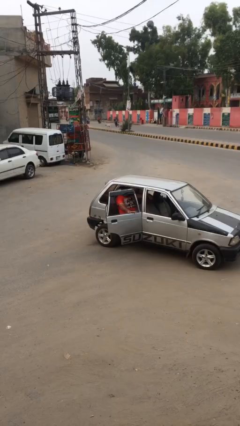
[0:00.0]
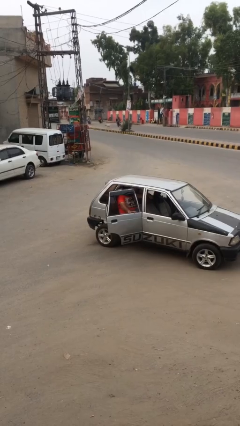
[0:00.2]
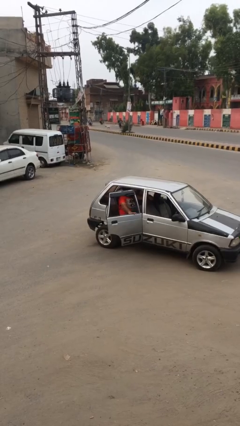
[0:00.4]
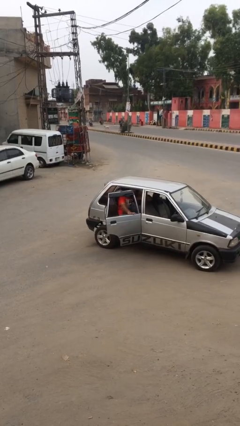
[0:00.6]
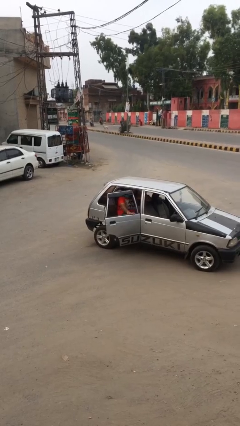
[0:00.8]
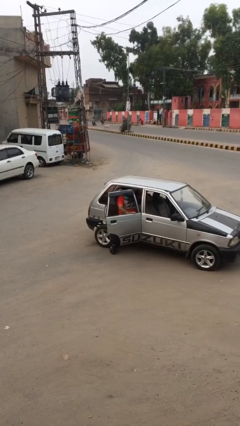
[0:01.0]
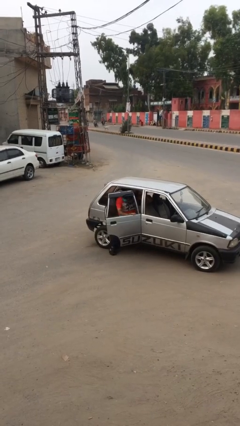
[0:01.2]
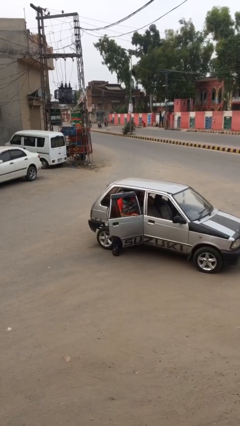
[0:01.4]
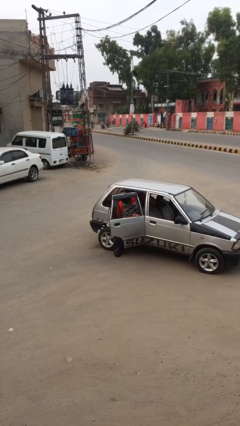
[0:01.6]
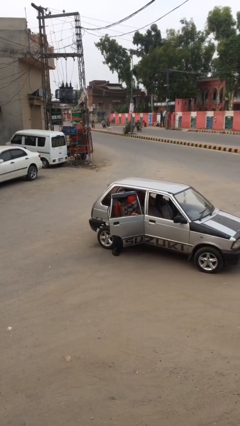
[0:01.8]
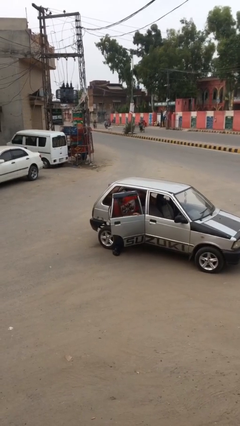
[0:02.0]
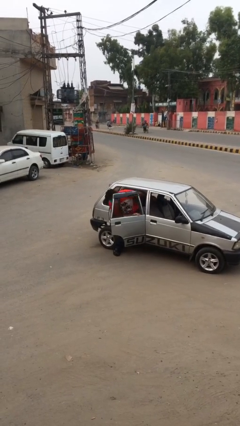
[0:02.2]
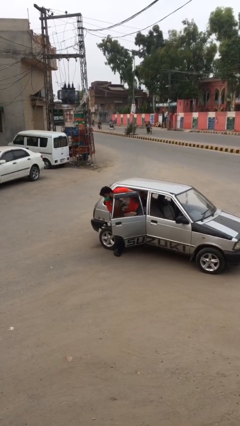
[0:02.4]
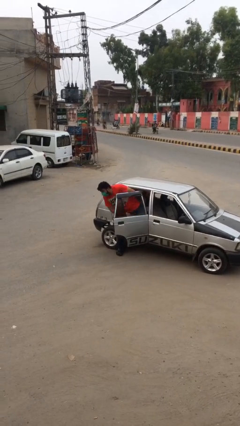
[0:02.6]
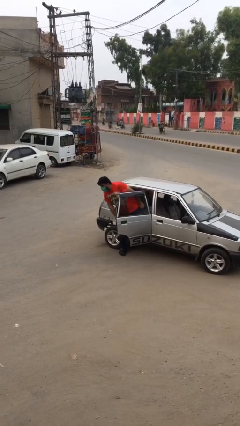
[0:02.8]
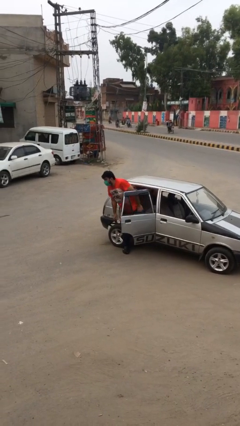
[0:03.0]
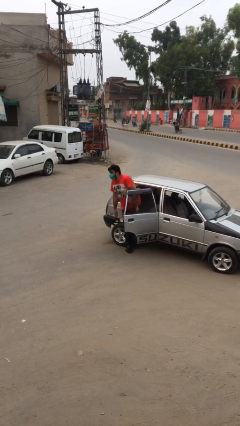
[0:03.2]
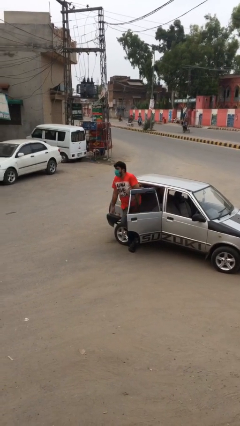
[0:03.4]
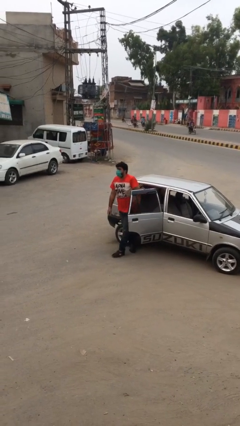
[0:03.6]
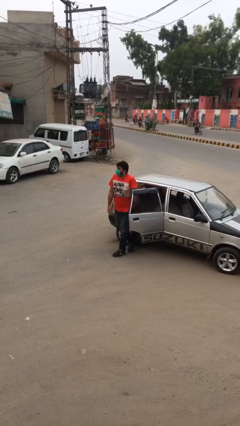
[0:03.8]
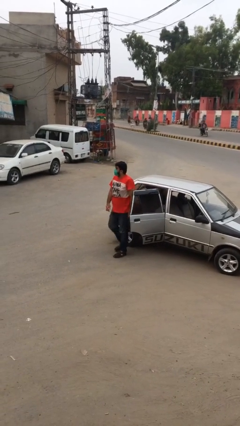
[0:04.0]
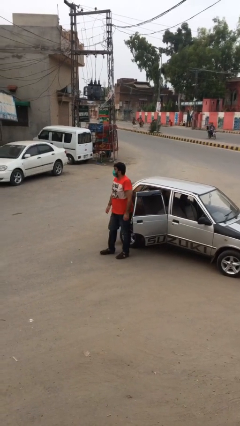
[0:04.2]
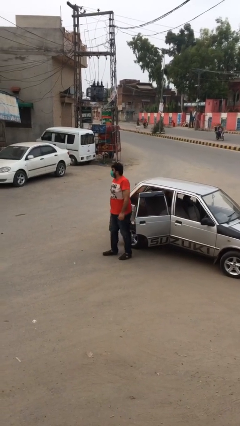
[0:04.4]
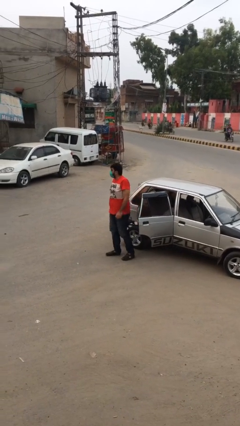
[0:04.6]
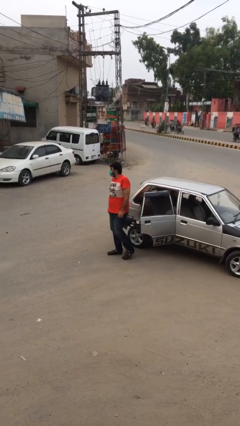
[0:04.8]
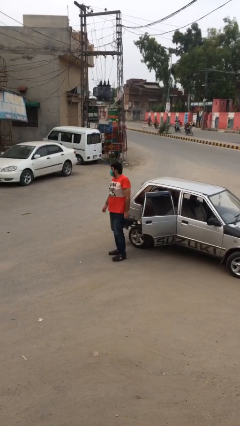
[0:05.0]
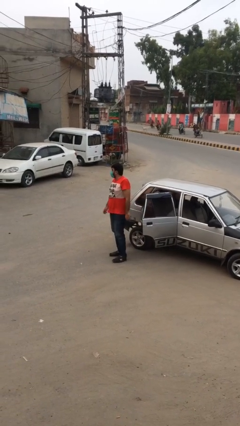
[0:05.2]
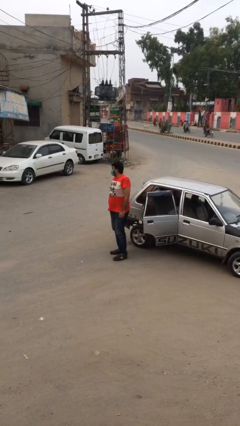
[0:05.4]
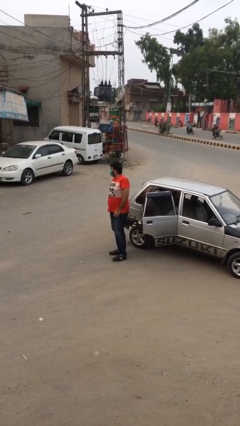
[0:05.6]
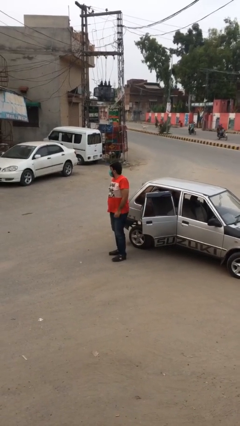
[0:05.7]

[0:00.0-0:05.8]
person exits car

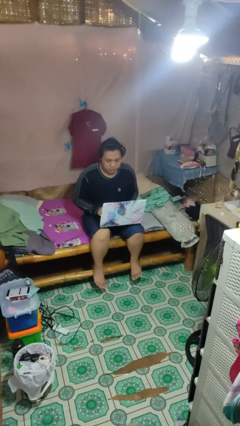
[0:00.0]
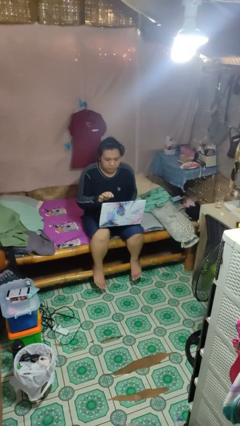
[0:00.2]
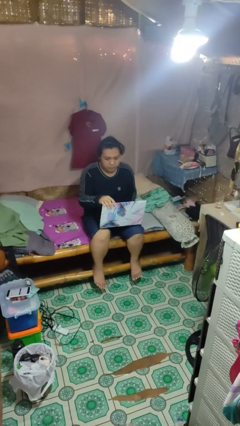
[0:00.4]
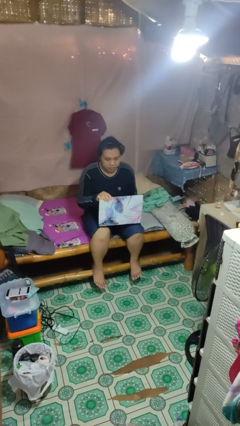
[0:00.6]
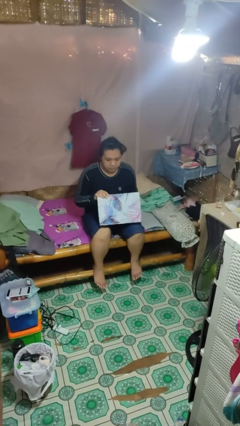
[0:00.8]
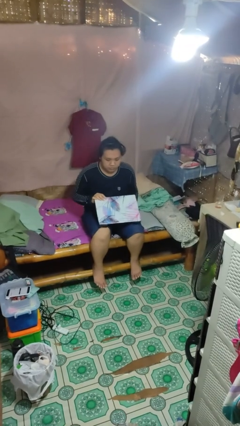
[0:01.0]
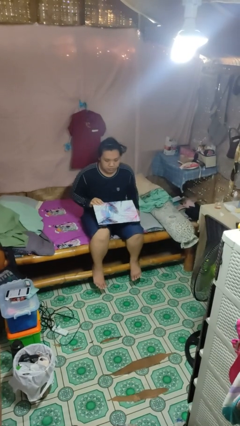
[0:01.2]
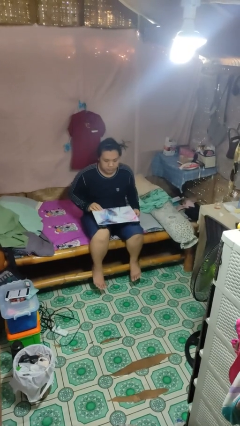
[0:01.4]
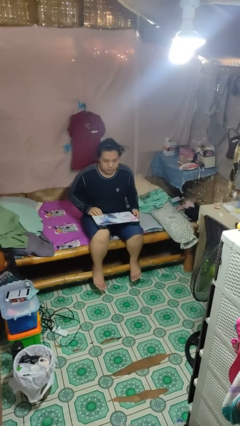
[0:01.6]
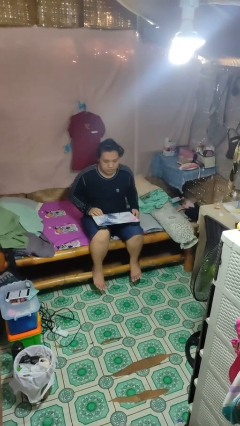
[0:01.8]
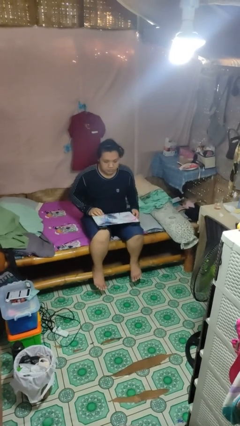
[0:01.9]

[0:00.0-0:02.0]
person closes laptop

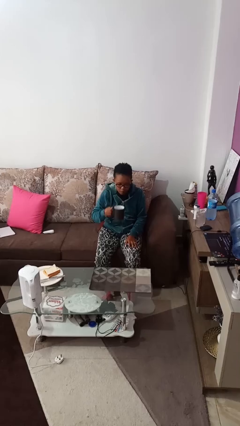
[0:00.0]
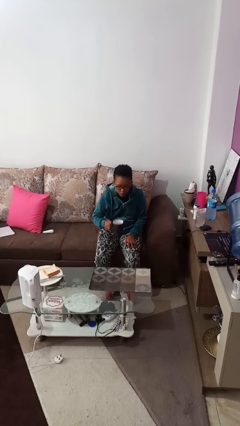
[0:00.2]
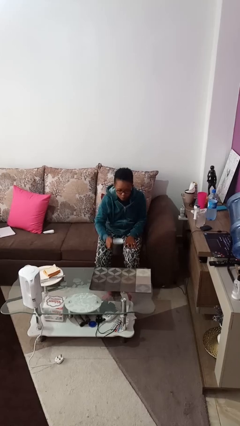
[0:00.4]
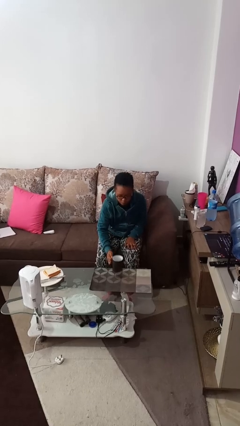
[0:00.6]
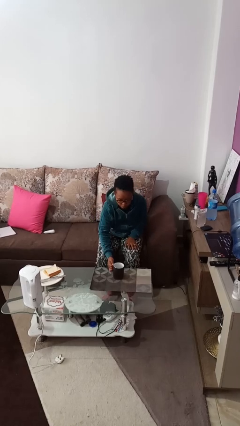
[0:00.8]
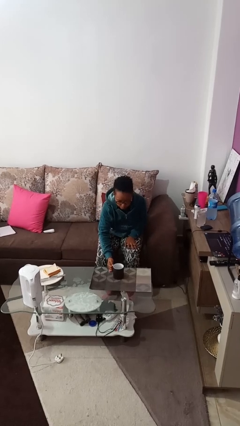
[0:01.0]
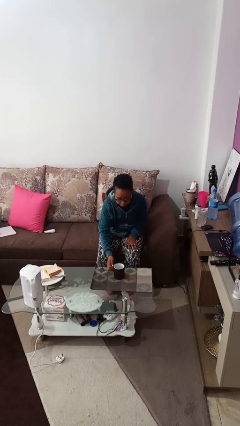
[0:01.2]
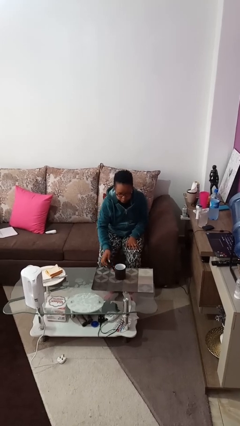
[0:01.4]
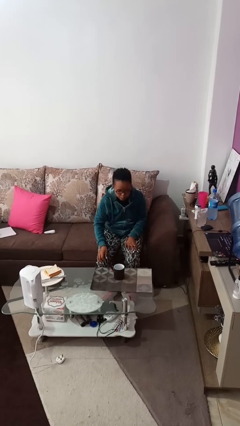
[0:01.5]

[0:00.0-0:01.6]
person puts down object on table

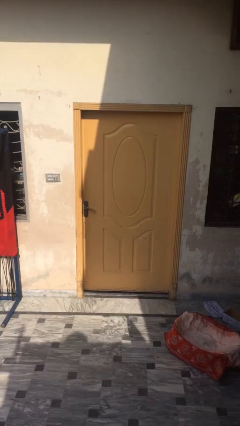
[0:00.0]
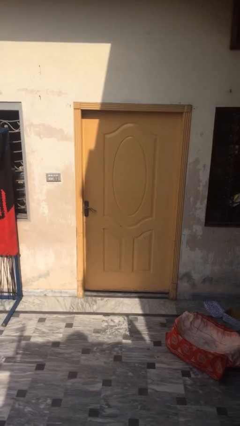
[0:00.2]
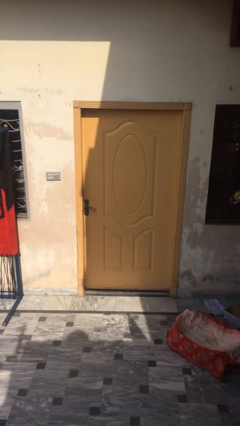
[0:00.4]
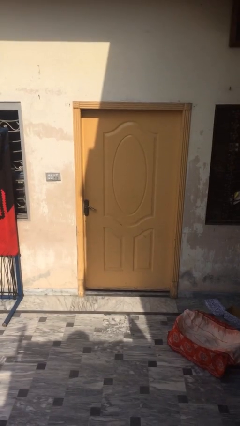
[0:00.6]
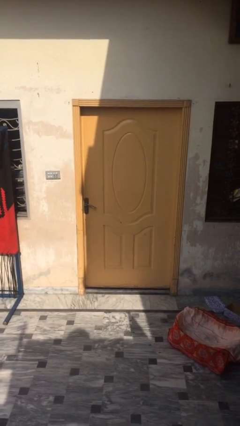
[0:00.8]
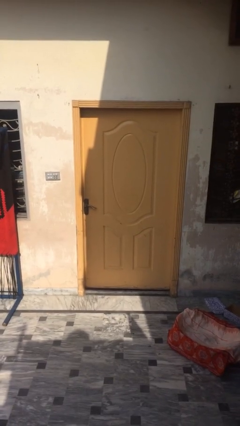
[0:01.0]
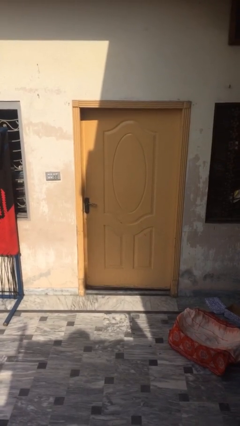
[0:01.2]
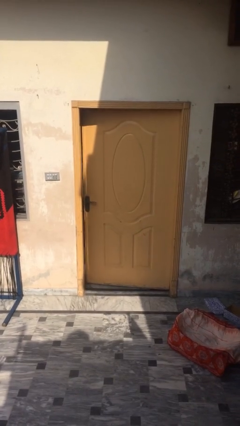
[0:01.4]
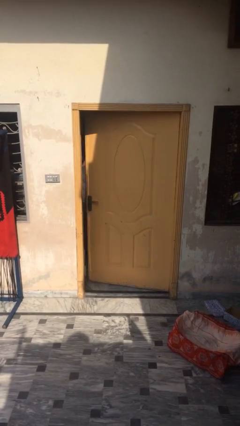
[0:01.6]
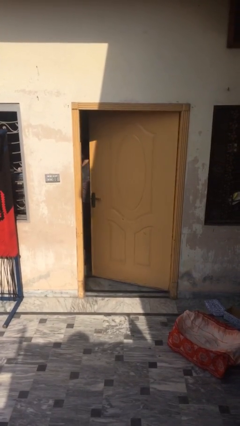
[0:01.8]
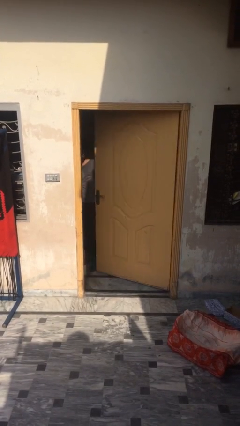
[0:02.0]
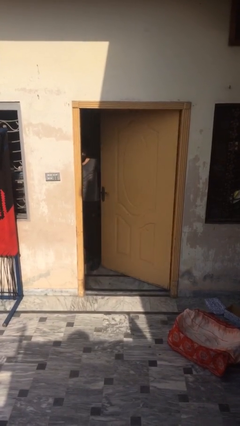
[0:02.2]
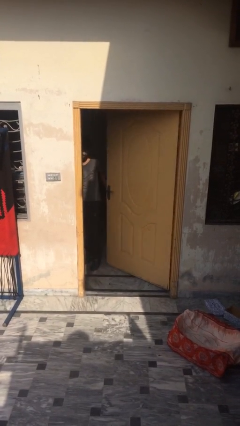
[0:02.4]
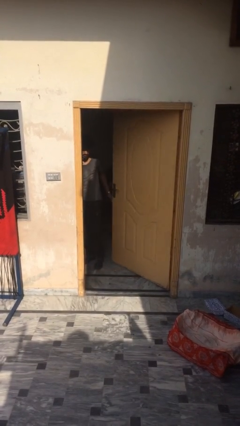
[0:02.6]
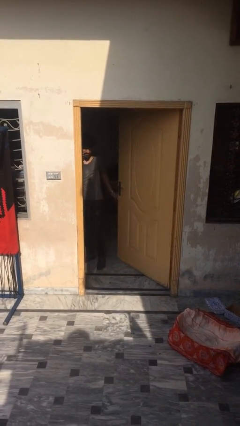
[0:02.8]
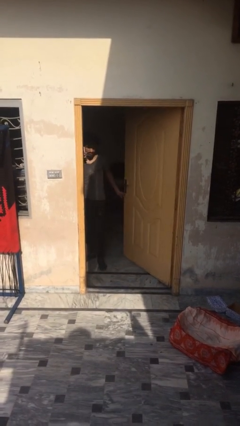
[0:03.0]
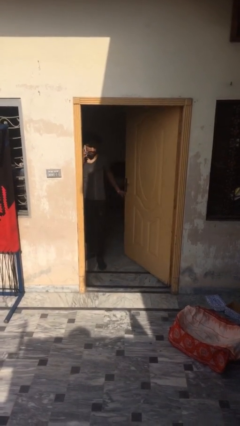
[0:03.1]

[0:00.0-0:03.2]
person opens facility door

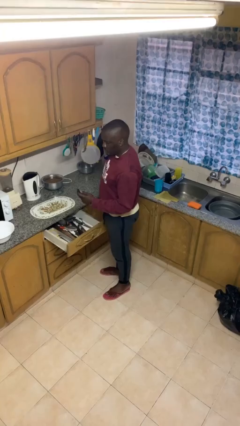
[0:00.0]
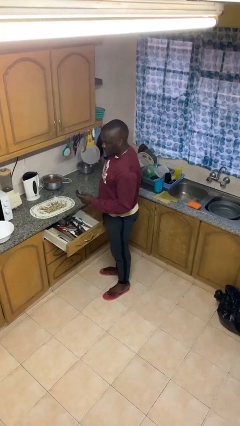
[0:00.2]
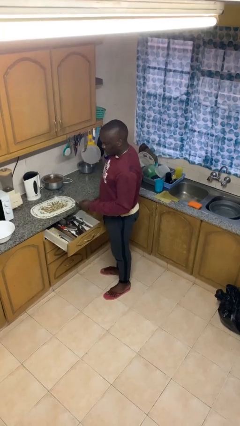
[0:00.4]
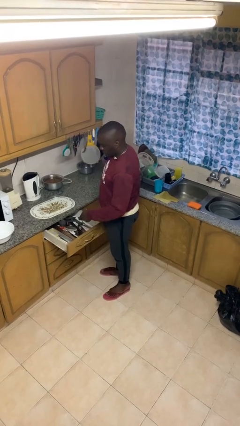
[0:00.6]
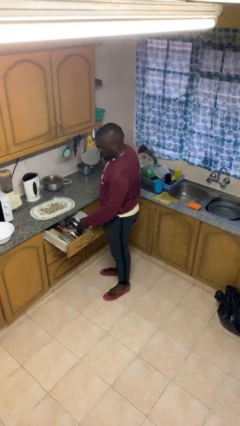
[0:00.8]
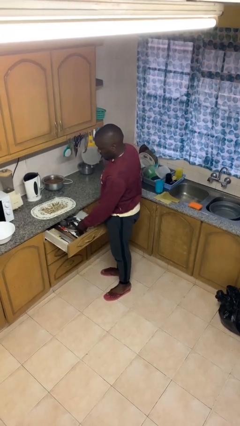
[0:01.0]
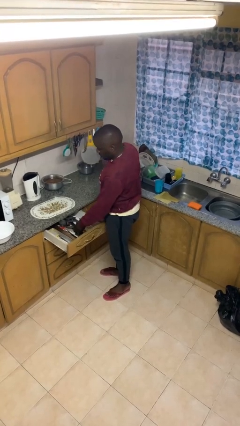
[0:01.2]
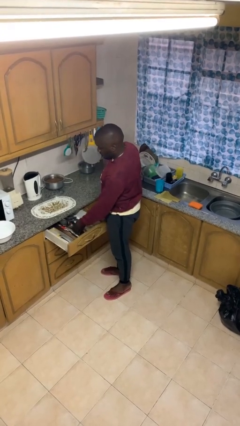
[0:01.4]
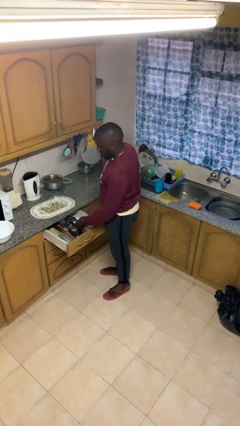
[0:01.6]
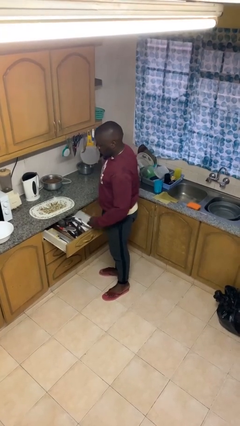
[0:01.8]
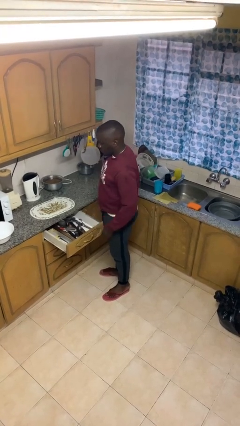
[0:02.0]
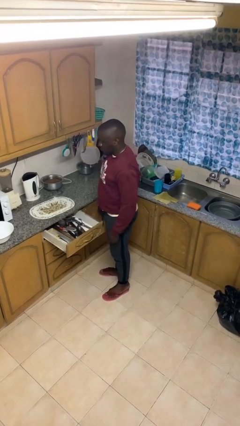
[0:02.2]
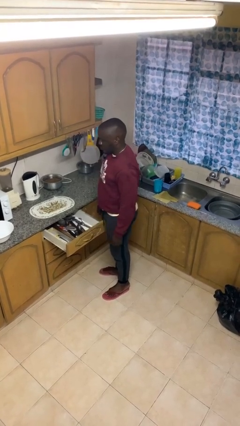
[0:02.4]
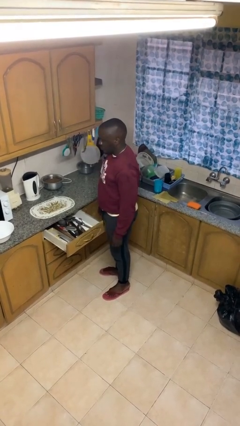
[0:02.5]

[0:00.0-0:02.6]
person puts object into kitchen drawer

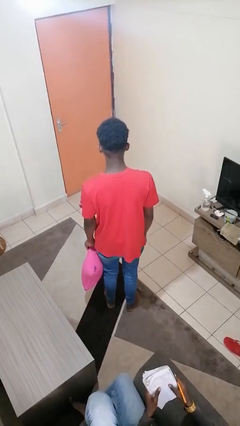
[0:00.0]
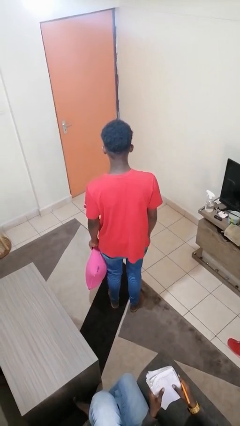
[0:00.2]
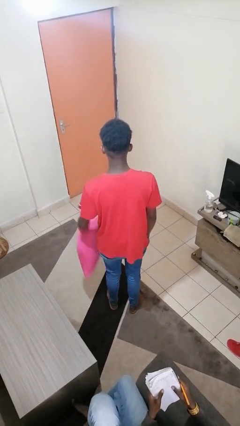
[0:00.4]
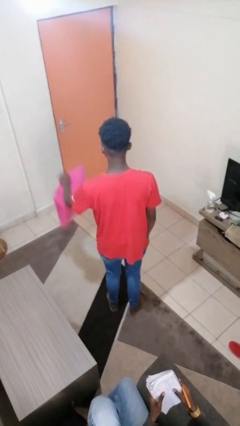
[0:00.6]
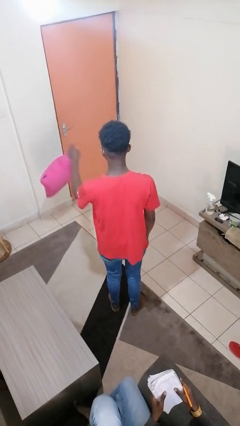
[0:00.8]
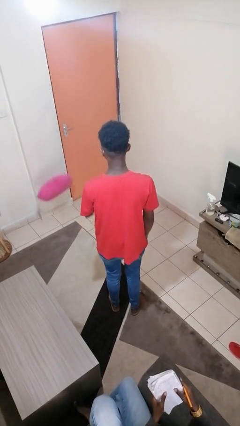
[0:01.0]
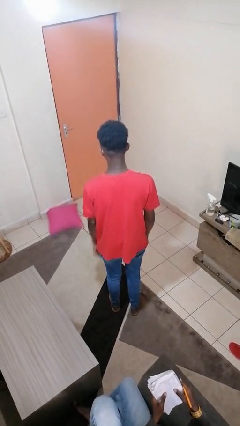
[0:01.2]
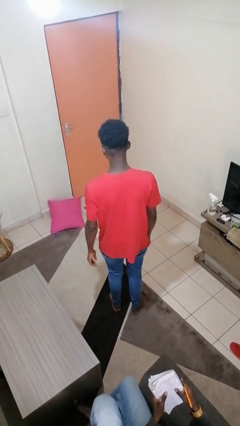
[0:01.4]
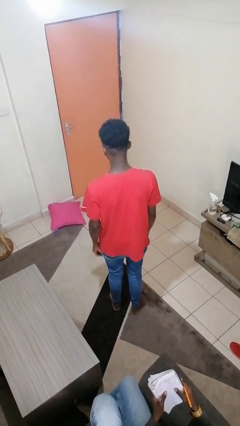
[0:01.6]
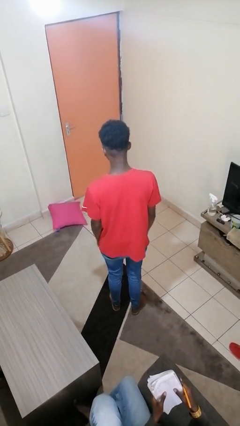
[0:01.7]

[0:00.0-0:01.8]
person throws object to ground

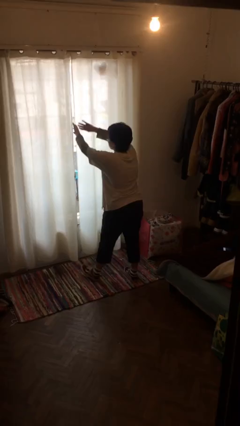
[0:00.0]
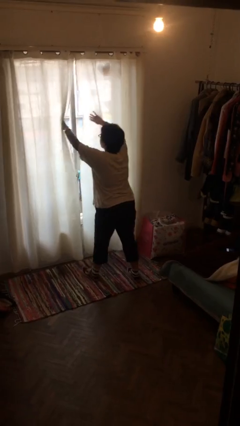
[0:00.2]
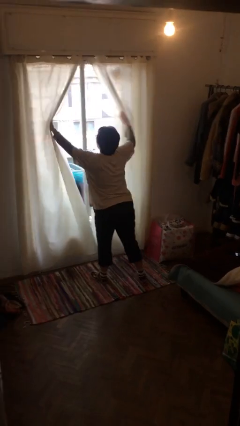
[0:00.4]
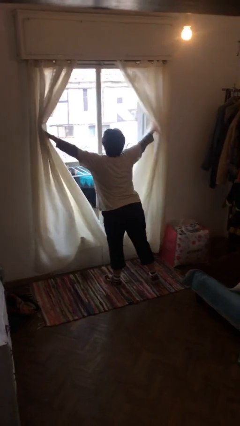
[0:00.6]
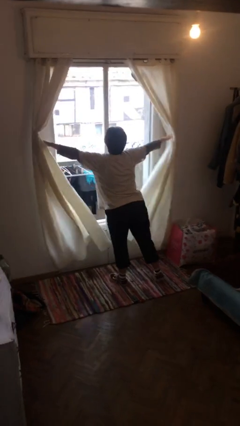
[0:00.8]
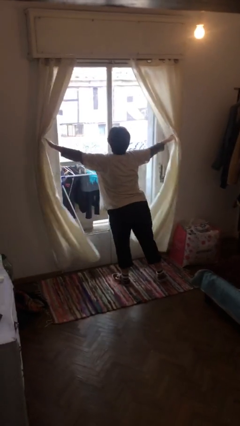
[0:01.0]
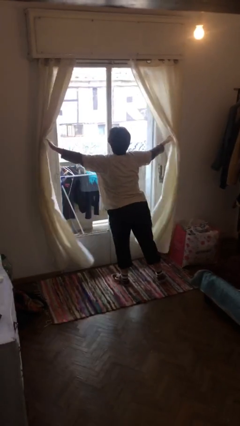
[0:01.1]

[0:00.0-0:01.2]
person opens curtains
